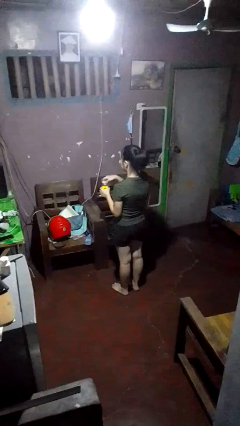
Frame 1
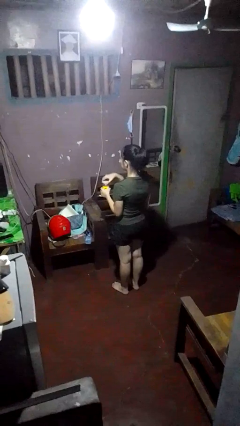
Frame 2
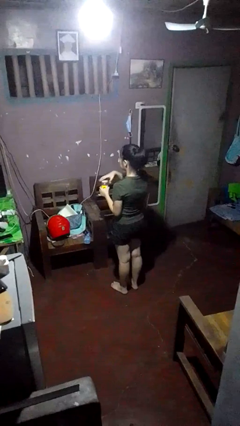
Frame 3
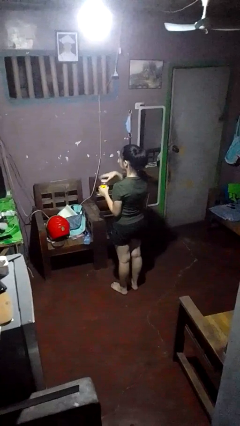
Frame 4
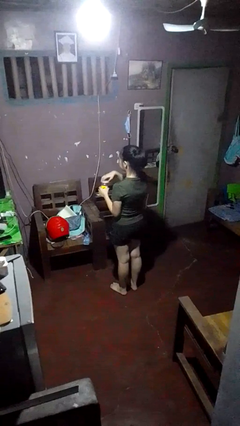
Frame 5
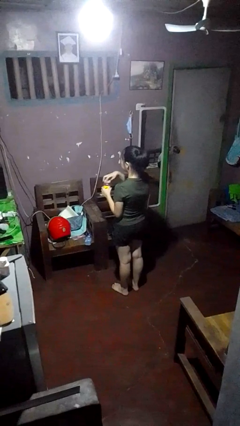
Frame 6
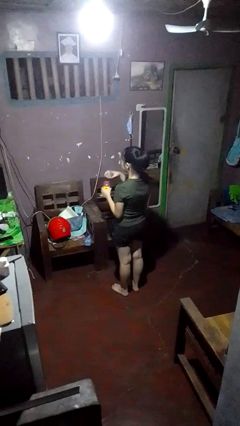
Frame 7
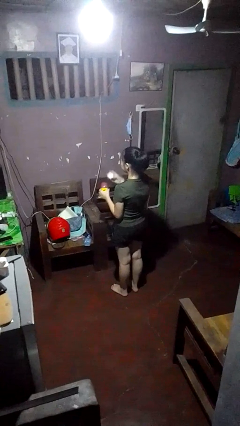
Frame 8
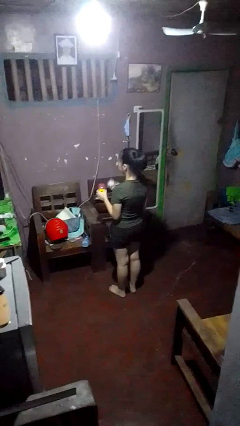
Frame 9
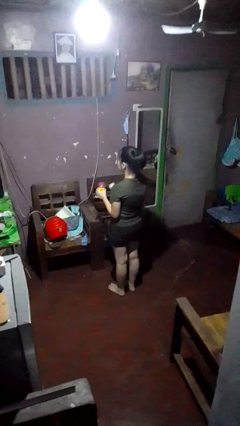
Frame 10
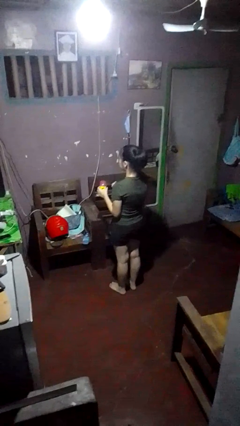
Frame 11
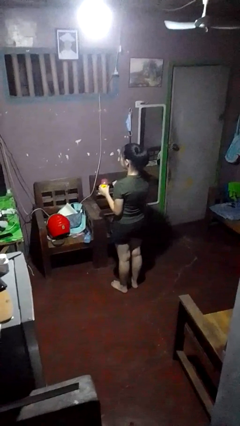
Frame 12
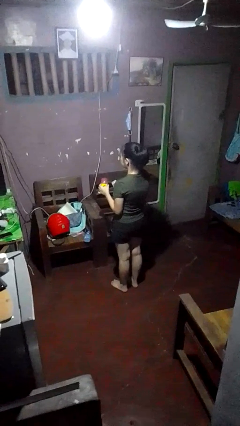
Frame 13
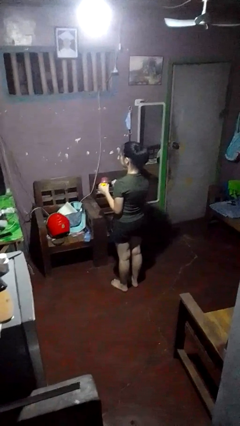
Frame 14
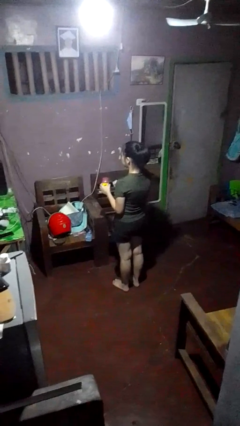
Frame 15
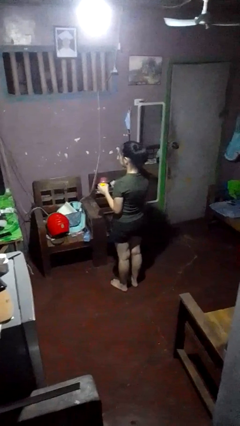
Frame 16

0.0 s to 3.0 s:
person opens jar

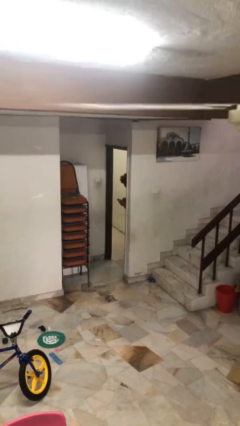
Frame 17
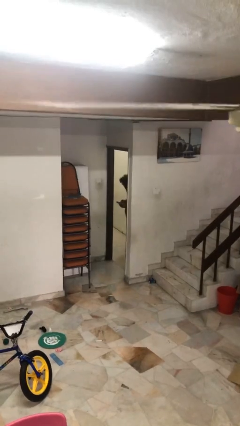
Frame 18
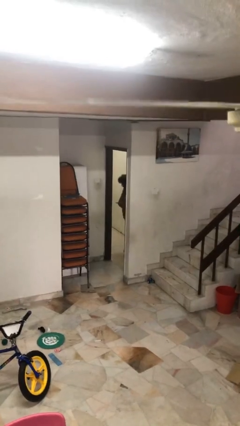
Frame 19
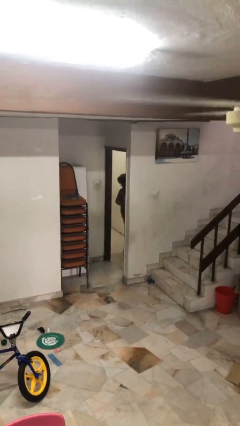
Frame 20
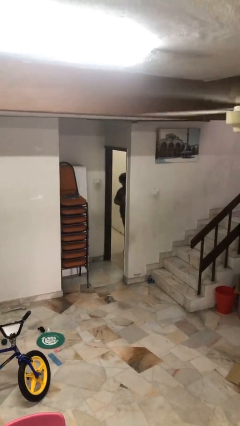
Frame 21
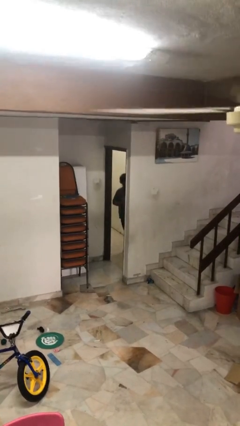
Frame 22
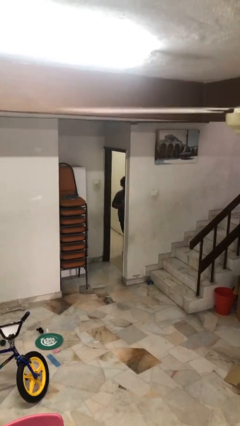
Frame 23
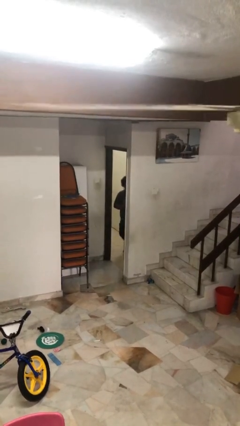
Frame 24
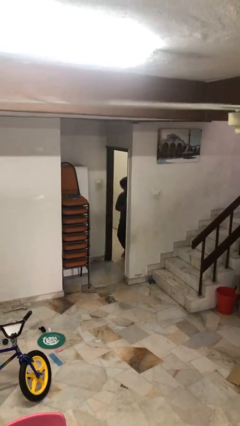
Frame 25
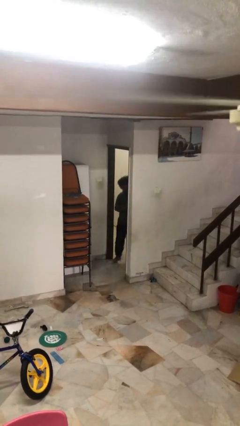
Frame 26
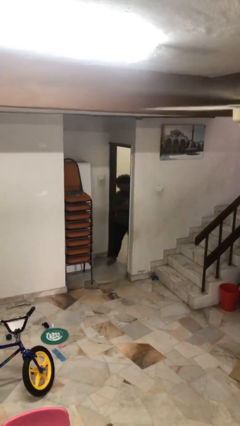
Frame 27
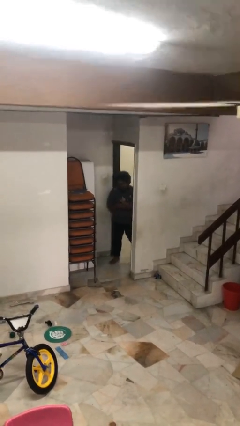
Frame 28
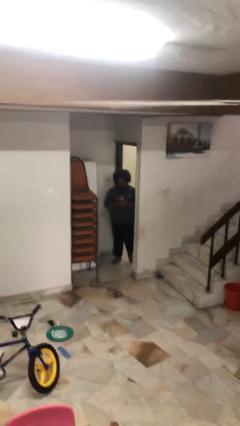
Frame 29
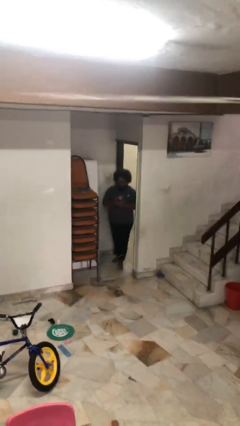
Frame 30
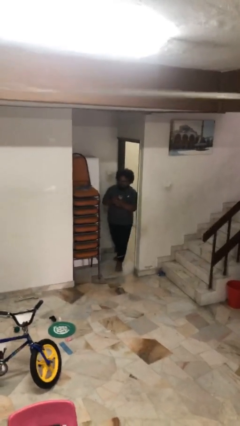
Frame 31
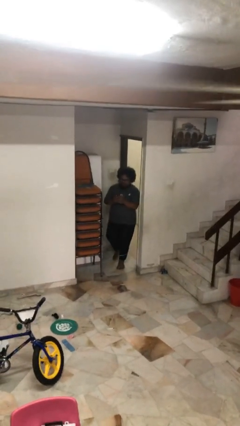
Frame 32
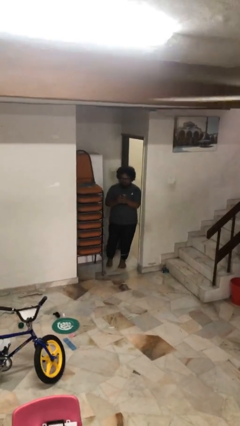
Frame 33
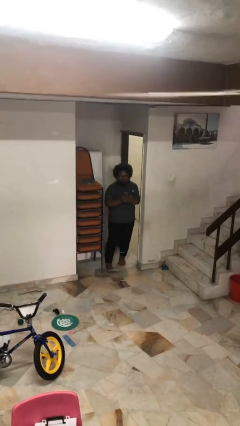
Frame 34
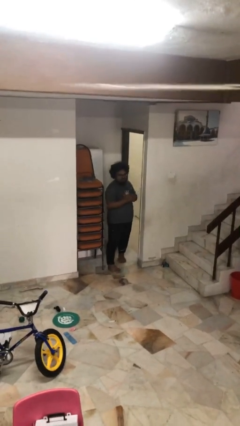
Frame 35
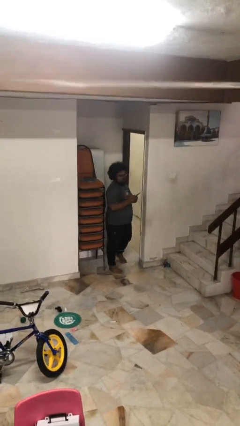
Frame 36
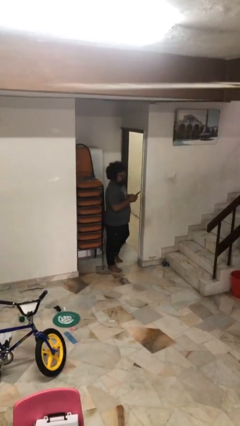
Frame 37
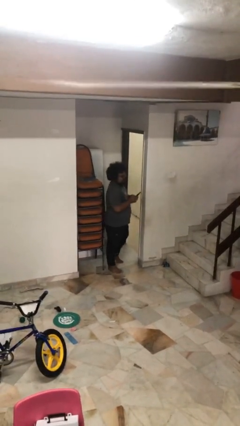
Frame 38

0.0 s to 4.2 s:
person enters scene through structure

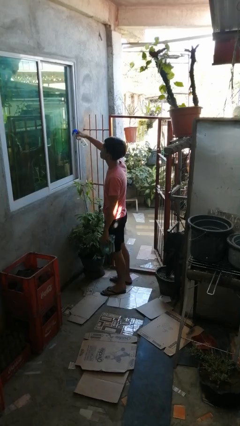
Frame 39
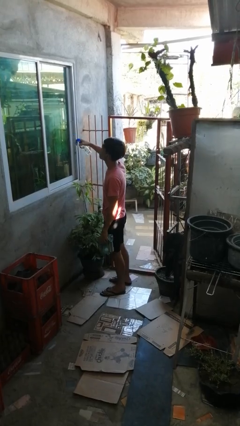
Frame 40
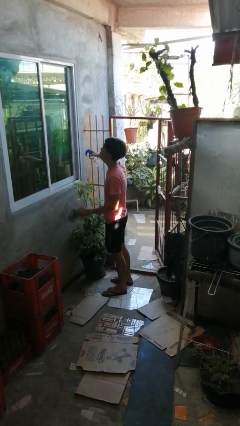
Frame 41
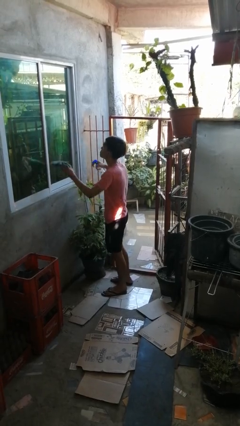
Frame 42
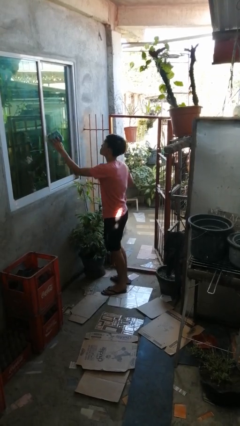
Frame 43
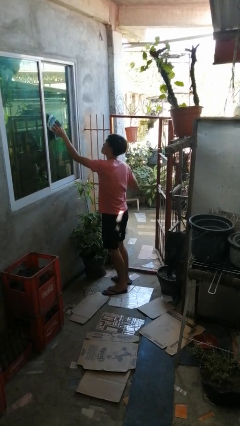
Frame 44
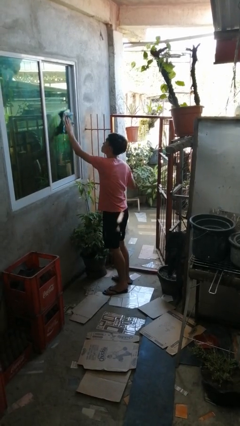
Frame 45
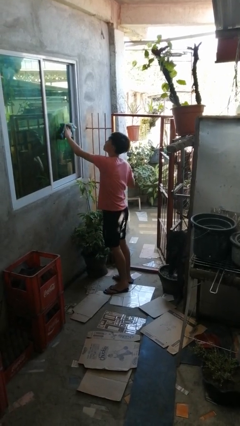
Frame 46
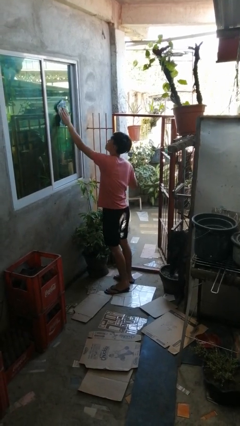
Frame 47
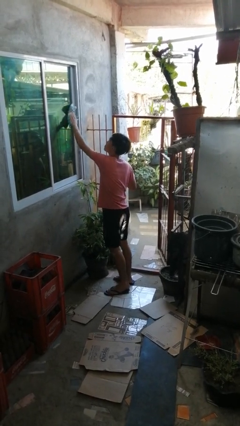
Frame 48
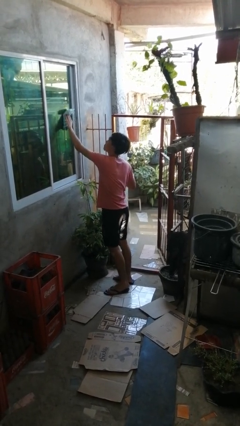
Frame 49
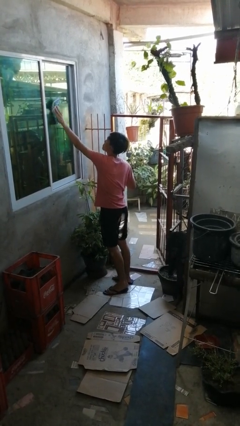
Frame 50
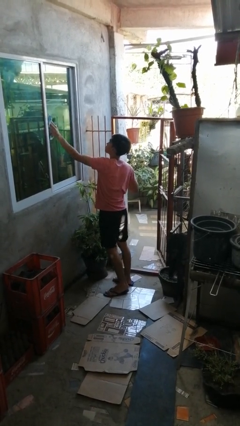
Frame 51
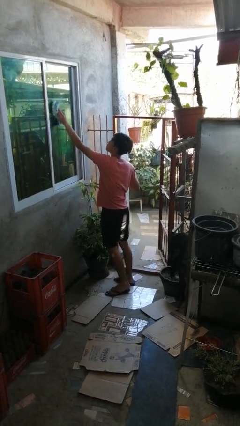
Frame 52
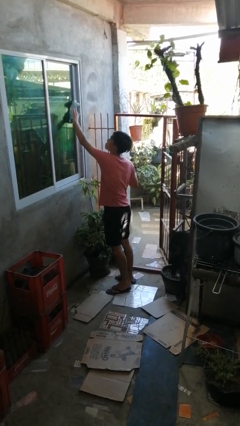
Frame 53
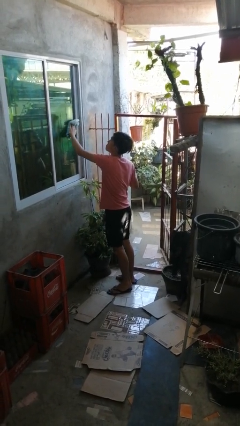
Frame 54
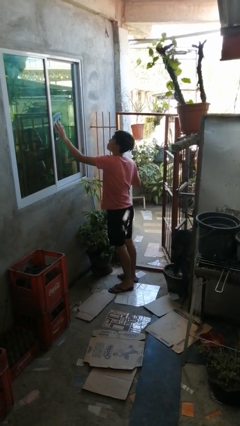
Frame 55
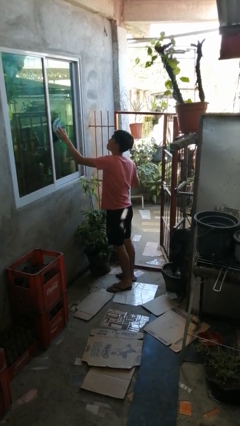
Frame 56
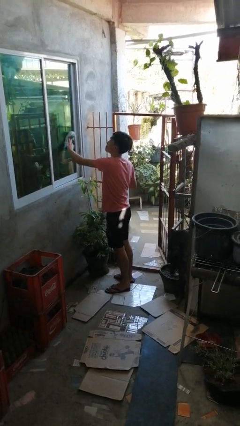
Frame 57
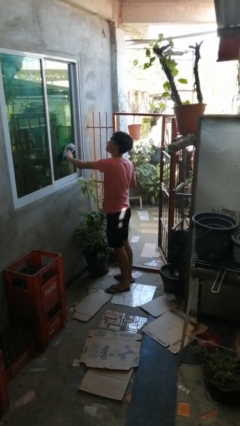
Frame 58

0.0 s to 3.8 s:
person washes window

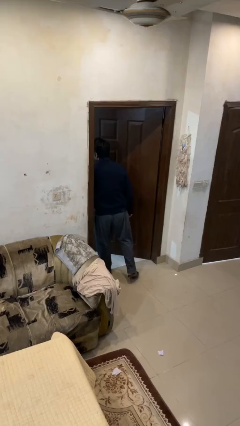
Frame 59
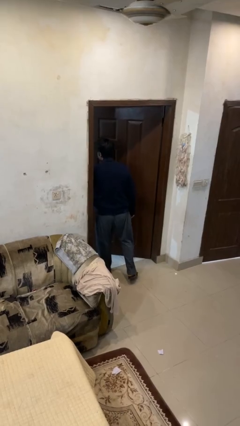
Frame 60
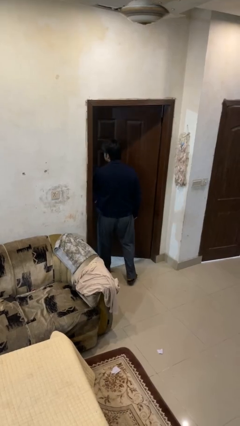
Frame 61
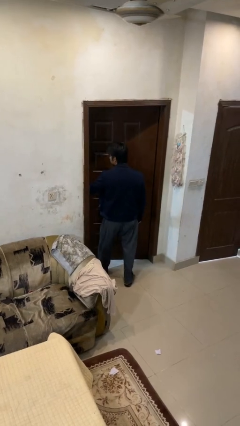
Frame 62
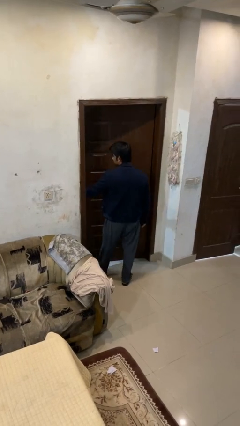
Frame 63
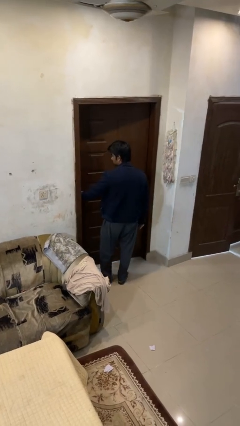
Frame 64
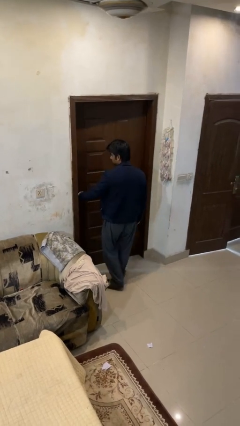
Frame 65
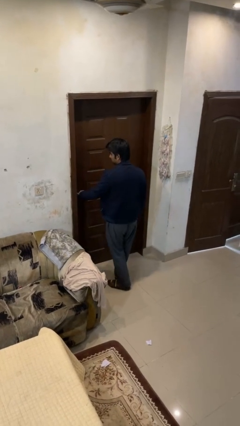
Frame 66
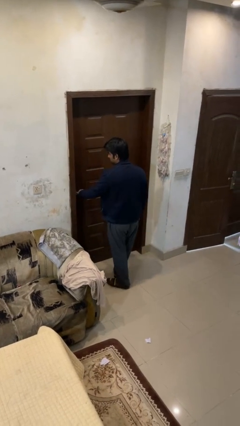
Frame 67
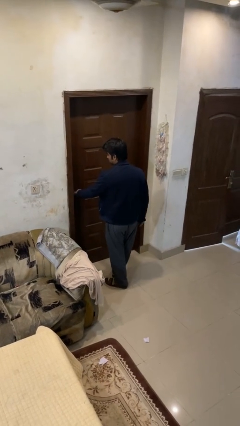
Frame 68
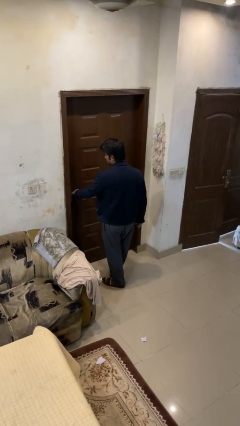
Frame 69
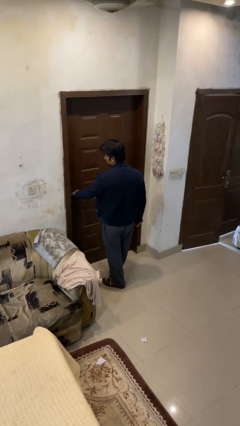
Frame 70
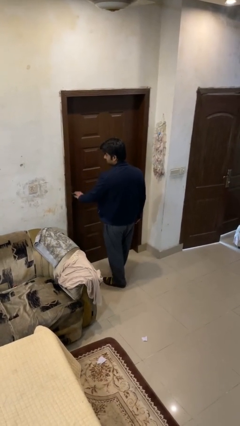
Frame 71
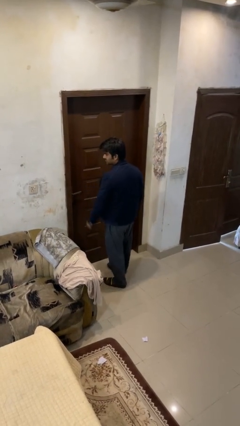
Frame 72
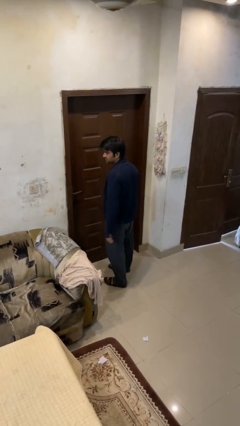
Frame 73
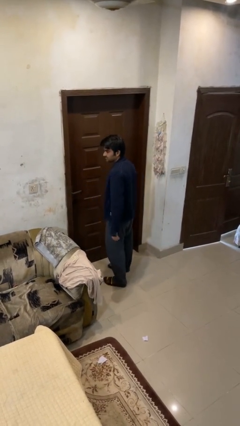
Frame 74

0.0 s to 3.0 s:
person closes facility door

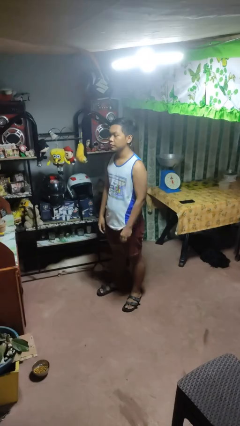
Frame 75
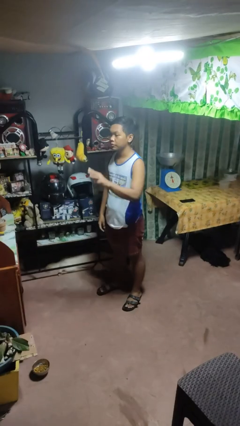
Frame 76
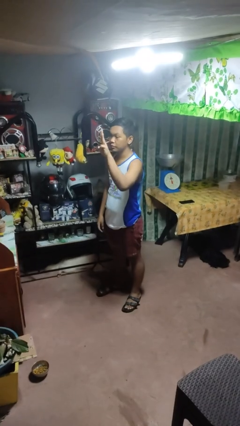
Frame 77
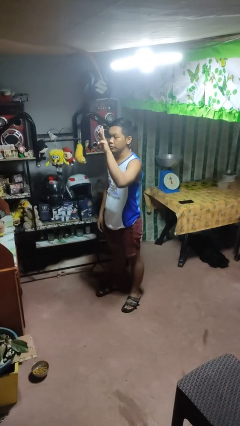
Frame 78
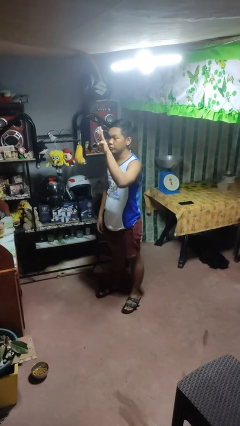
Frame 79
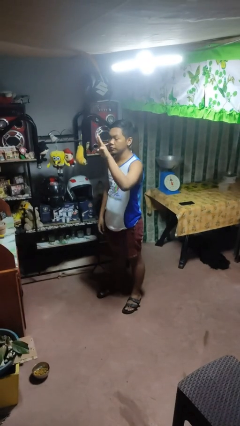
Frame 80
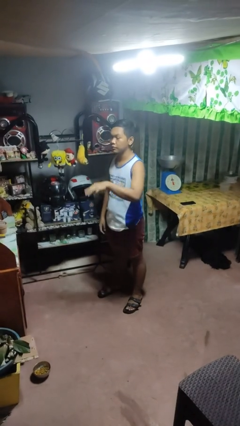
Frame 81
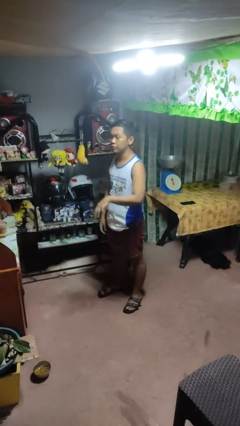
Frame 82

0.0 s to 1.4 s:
person gestures number three

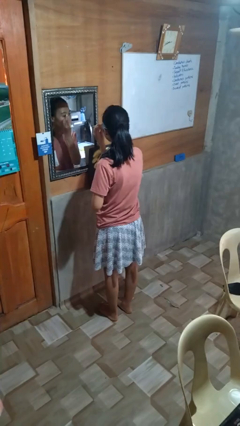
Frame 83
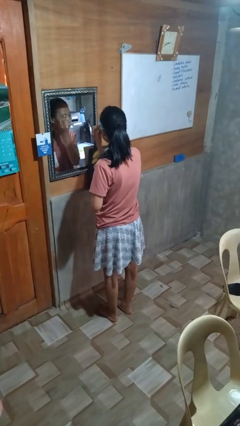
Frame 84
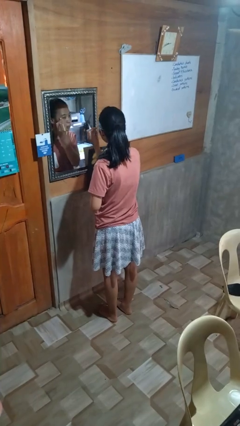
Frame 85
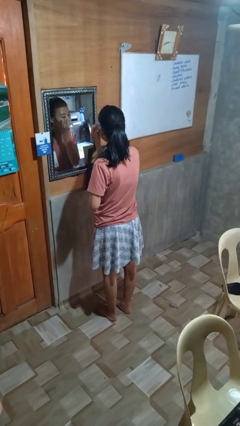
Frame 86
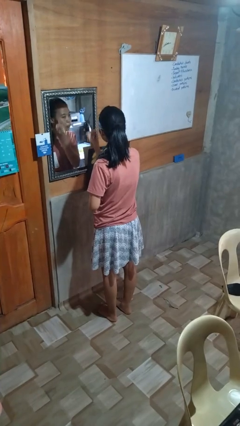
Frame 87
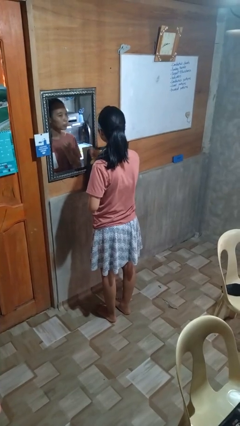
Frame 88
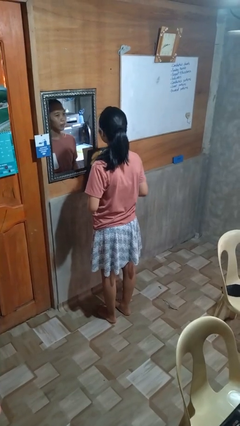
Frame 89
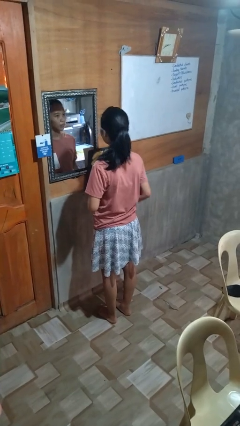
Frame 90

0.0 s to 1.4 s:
person applies eye makeup

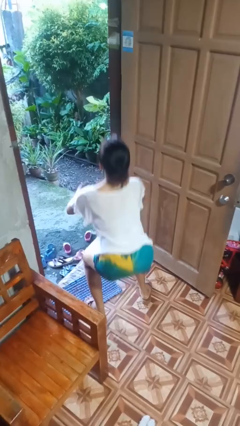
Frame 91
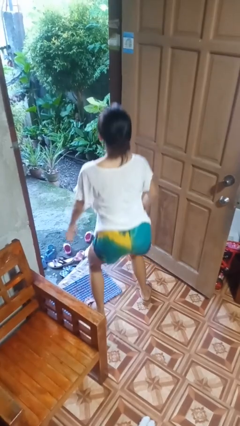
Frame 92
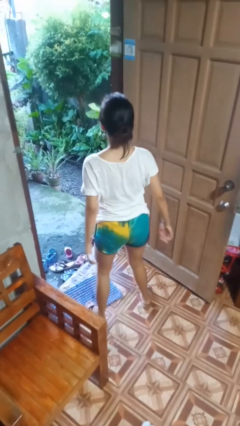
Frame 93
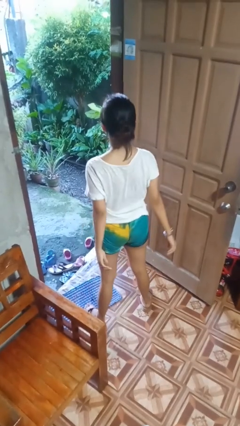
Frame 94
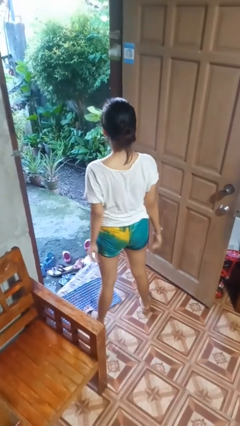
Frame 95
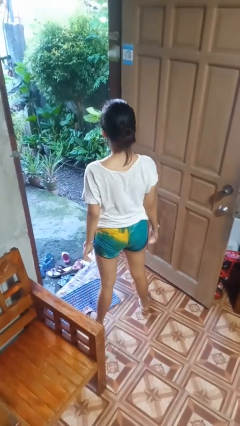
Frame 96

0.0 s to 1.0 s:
person stands up
